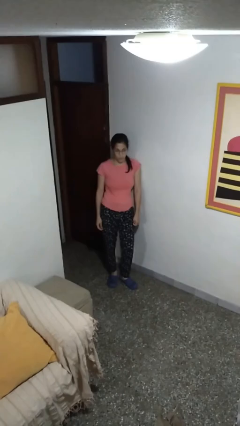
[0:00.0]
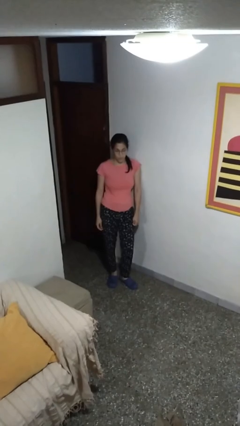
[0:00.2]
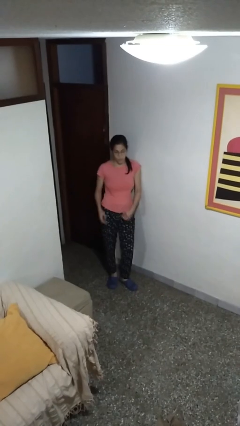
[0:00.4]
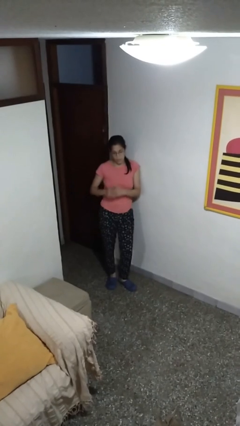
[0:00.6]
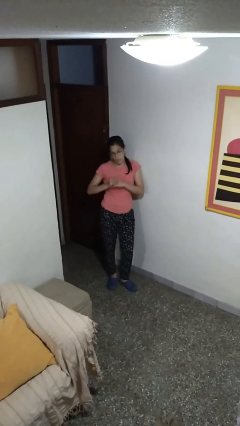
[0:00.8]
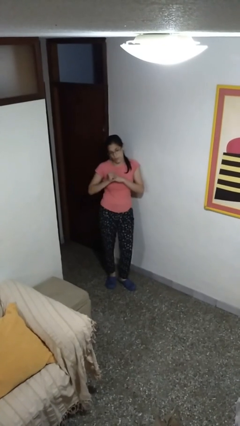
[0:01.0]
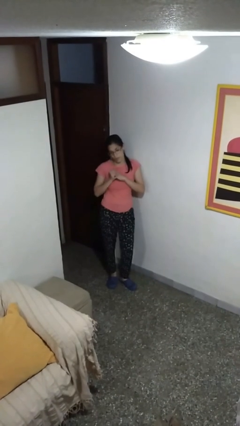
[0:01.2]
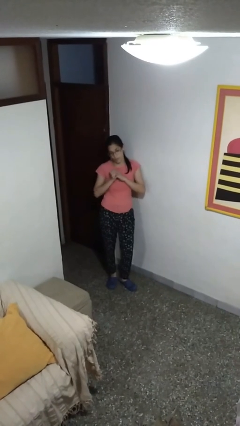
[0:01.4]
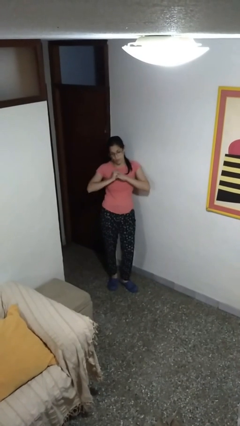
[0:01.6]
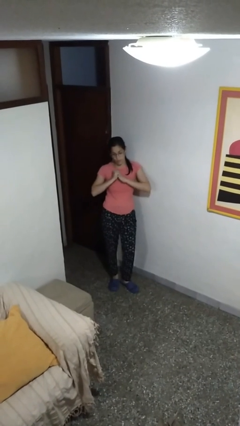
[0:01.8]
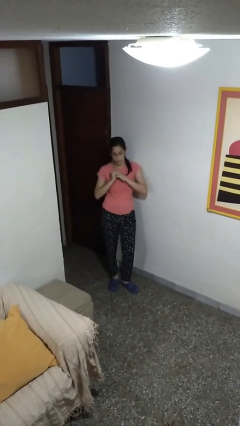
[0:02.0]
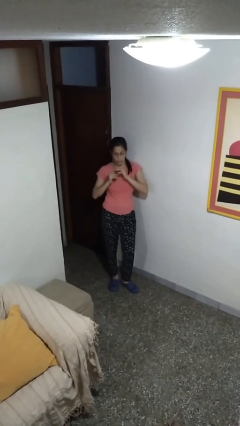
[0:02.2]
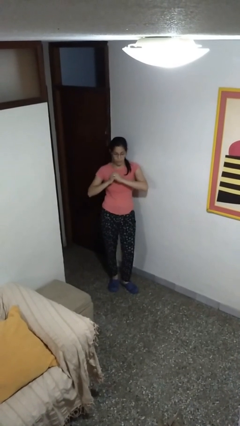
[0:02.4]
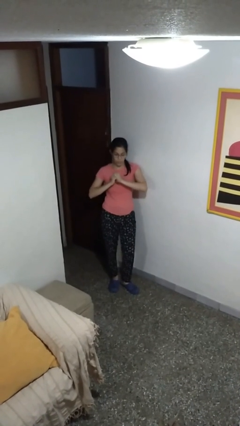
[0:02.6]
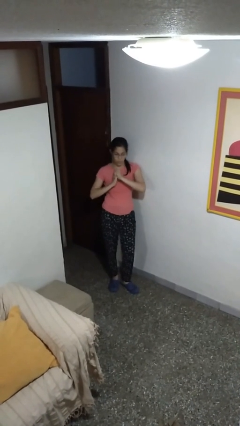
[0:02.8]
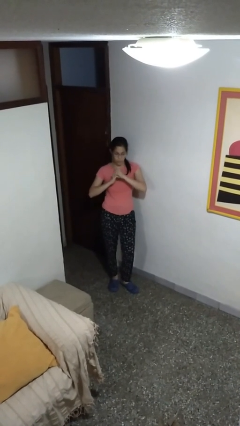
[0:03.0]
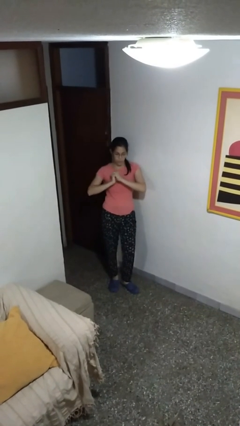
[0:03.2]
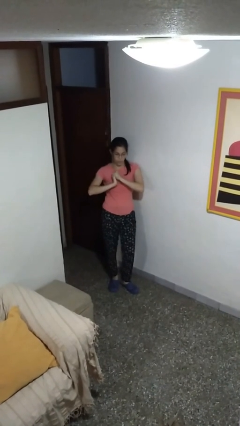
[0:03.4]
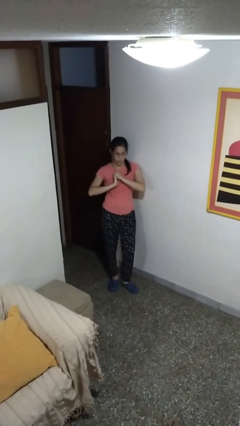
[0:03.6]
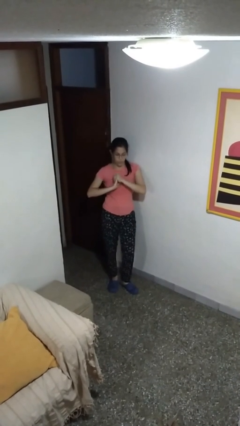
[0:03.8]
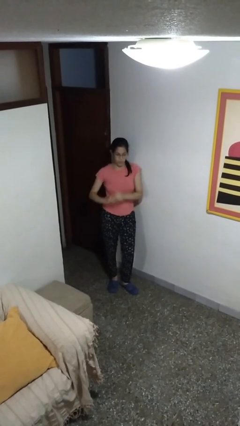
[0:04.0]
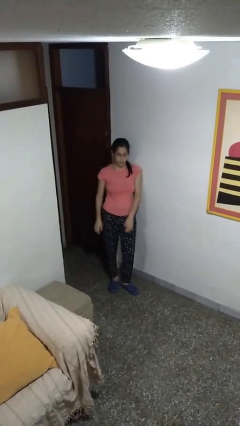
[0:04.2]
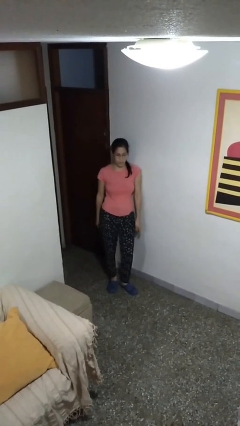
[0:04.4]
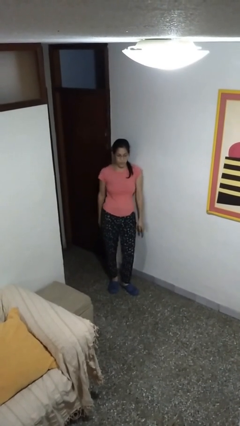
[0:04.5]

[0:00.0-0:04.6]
person cracks knuckles

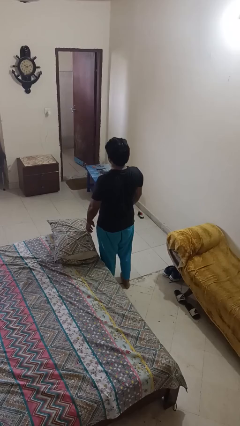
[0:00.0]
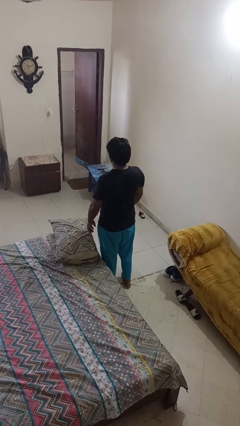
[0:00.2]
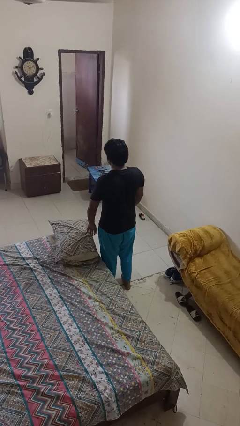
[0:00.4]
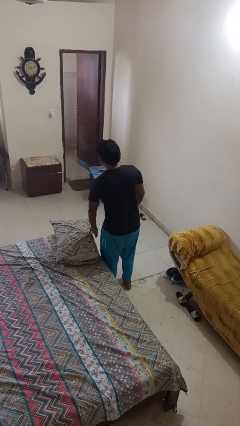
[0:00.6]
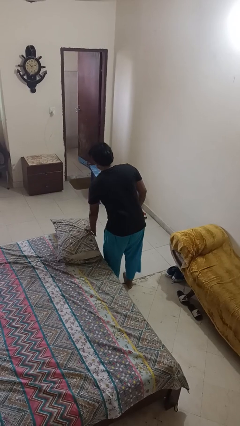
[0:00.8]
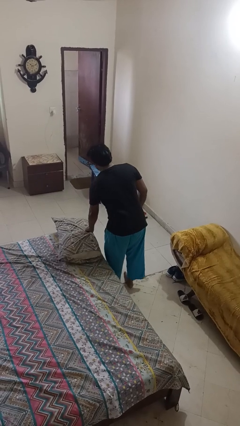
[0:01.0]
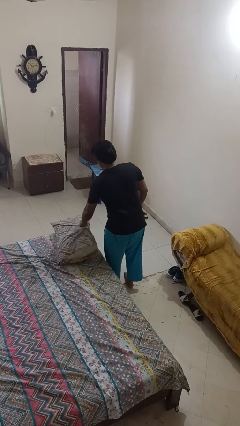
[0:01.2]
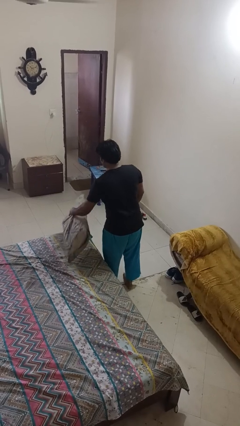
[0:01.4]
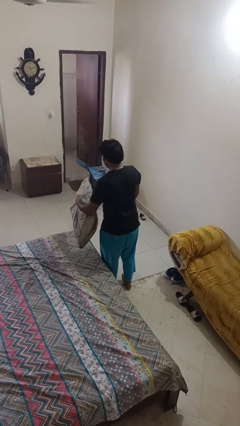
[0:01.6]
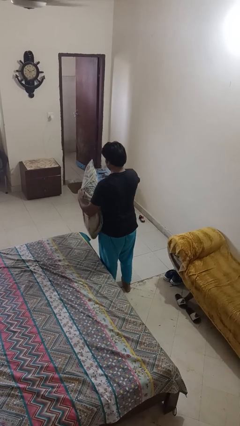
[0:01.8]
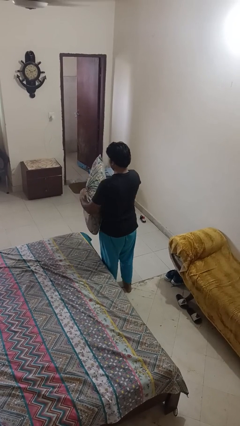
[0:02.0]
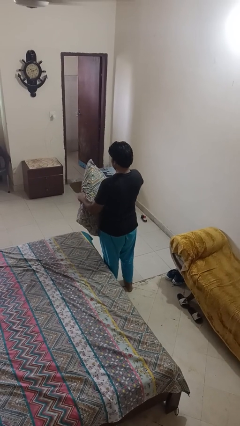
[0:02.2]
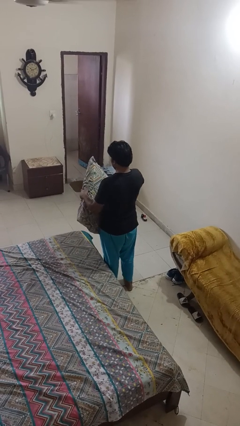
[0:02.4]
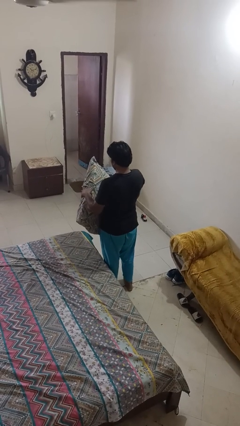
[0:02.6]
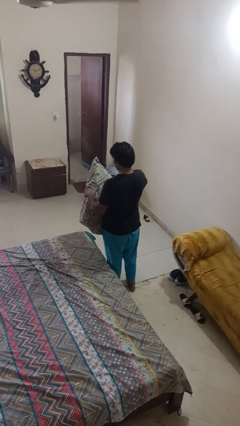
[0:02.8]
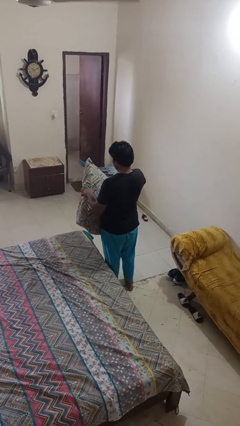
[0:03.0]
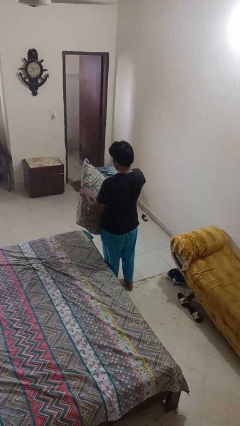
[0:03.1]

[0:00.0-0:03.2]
person picks up object from bed

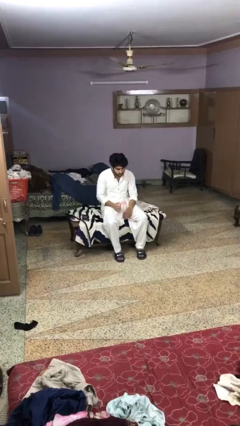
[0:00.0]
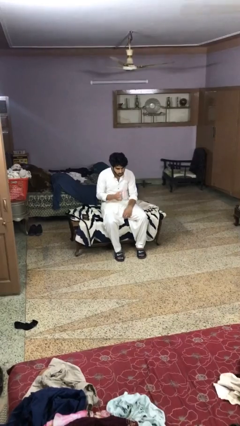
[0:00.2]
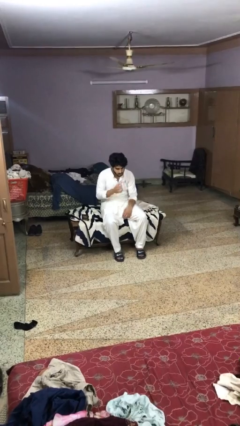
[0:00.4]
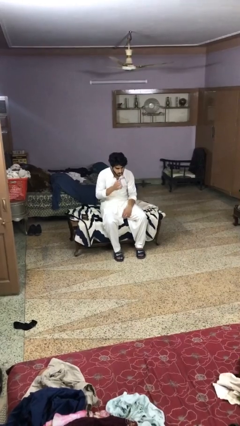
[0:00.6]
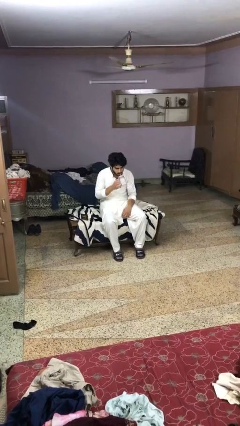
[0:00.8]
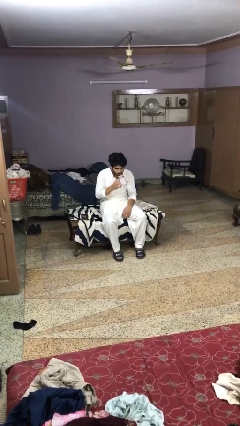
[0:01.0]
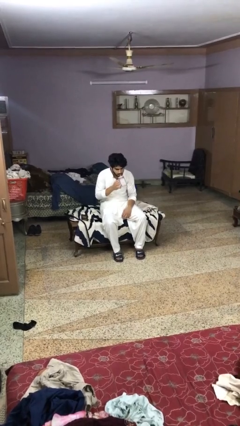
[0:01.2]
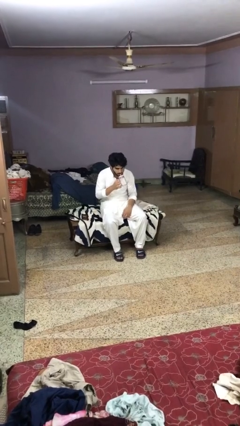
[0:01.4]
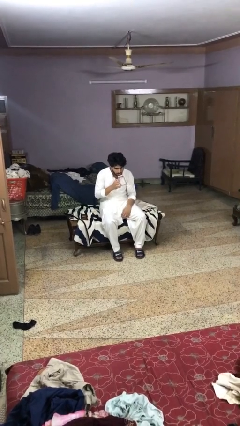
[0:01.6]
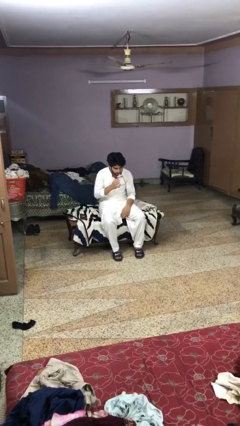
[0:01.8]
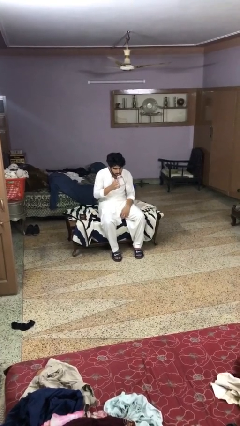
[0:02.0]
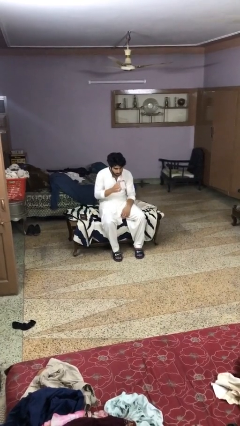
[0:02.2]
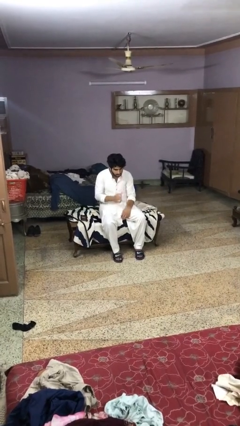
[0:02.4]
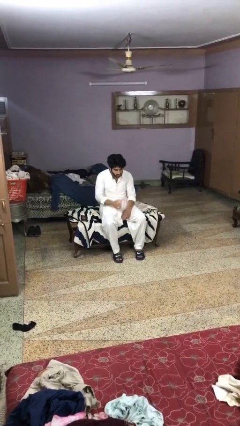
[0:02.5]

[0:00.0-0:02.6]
person drinks from straw

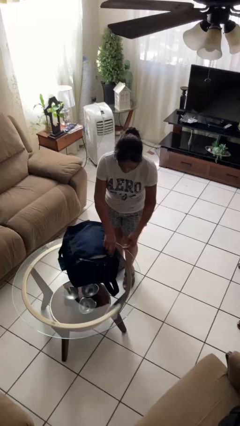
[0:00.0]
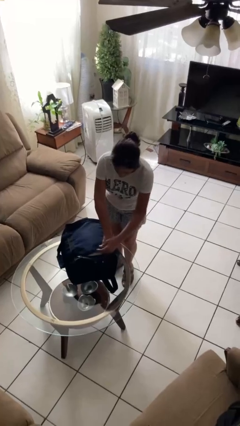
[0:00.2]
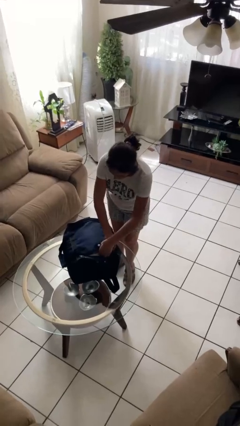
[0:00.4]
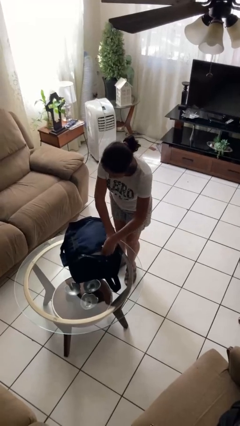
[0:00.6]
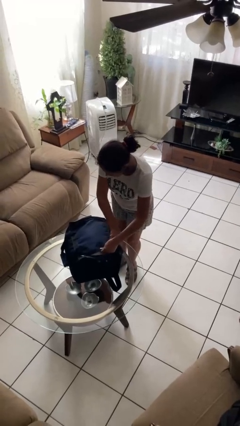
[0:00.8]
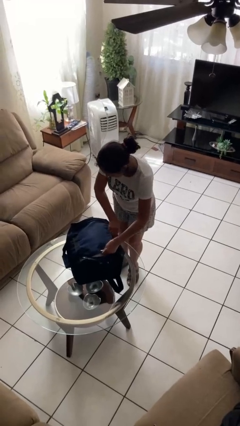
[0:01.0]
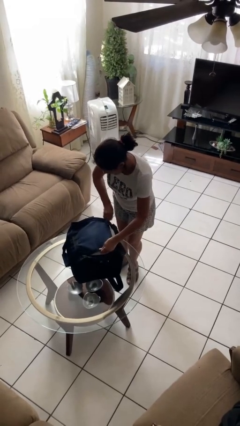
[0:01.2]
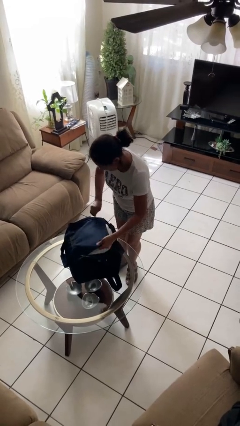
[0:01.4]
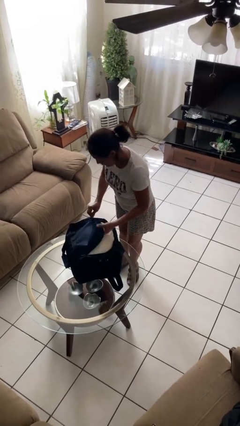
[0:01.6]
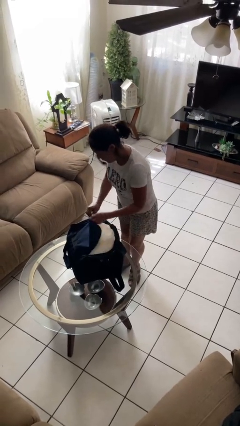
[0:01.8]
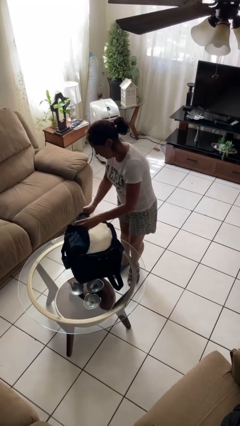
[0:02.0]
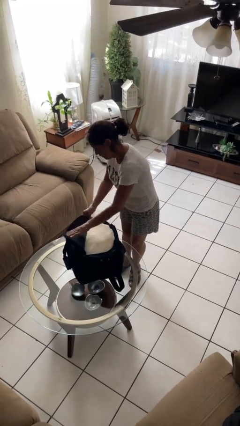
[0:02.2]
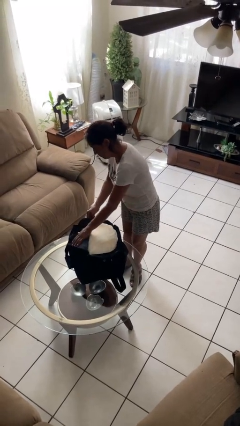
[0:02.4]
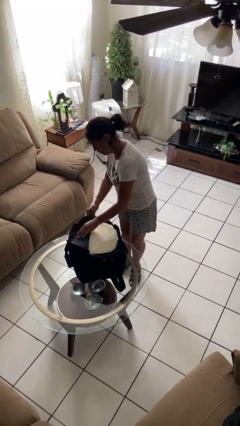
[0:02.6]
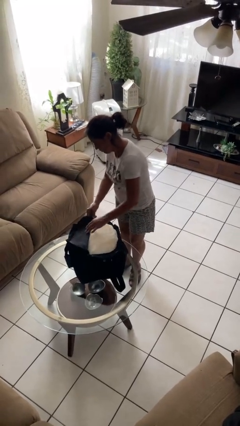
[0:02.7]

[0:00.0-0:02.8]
person opens suitcase

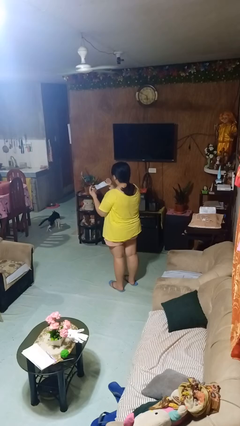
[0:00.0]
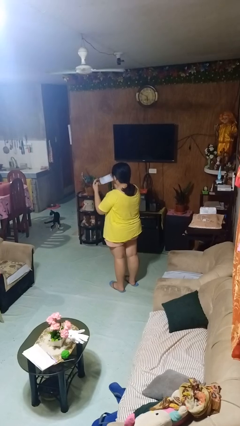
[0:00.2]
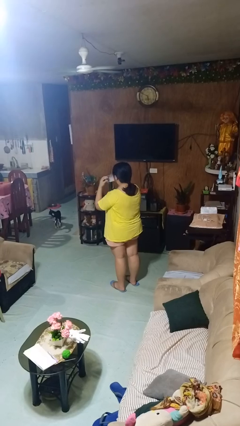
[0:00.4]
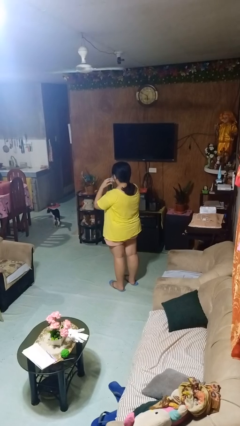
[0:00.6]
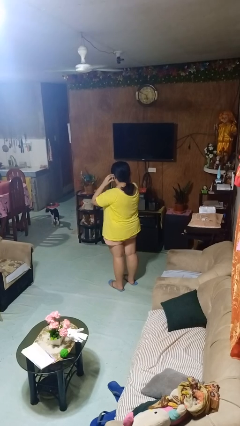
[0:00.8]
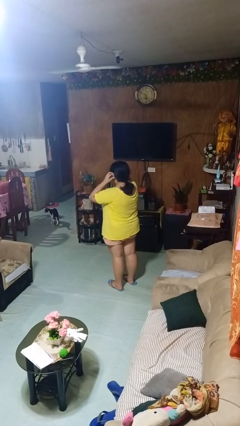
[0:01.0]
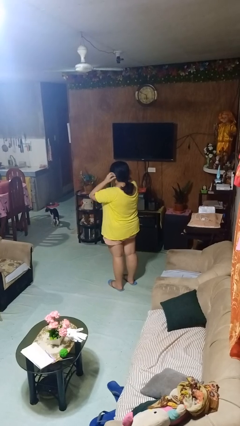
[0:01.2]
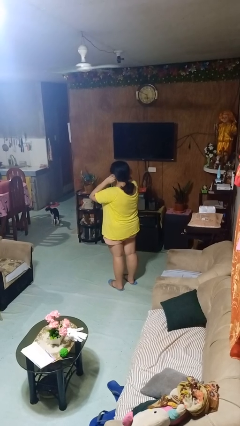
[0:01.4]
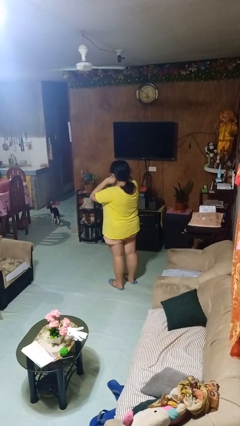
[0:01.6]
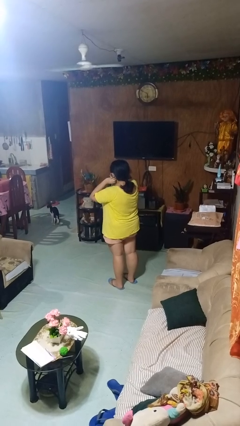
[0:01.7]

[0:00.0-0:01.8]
person puts on facemask

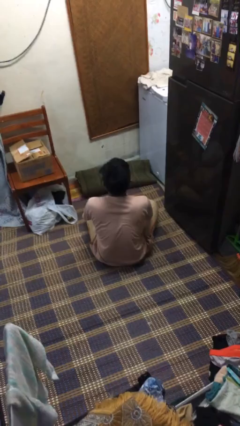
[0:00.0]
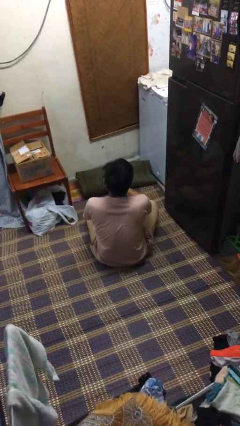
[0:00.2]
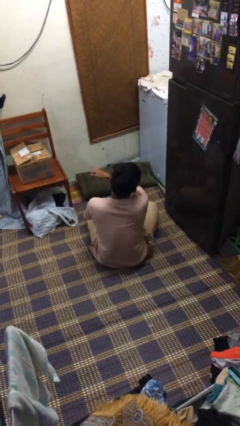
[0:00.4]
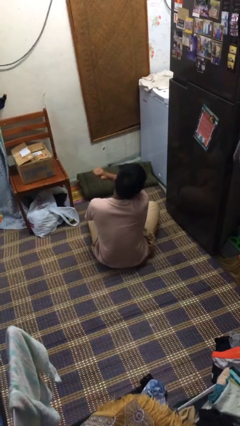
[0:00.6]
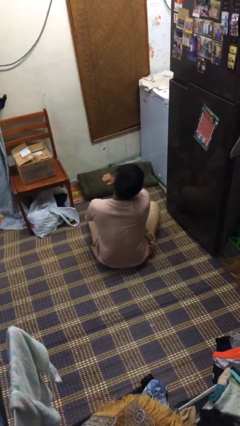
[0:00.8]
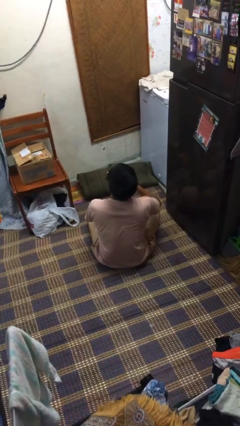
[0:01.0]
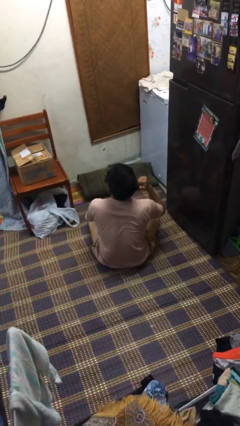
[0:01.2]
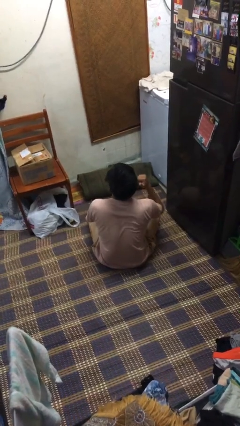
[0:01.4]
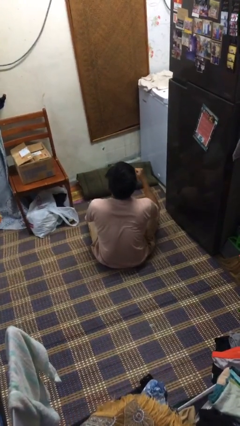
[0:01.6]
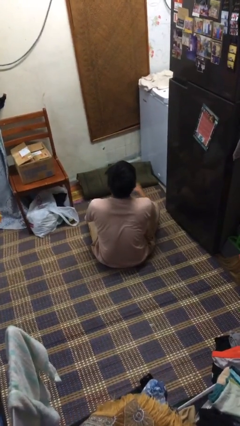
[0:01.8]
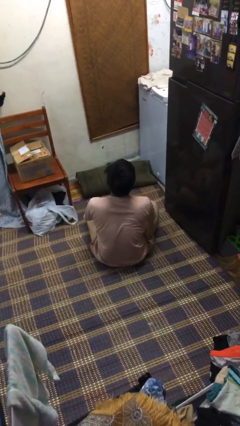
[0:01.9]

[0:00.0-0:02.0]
person gestures cut

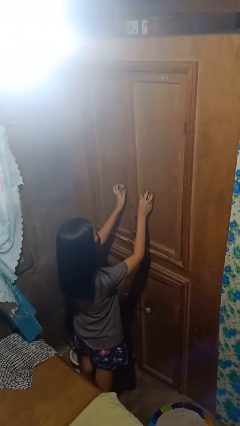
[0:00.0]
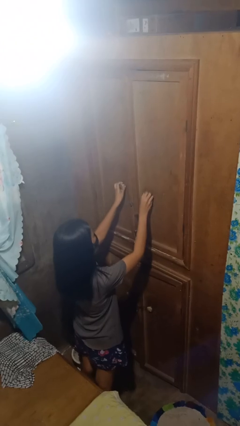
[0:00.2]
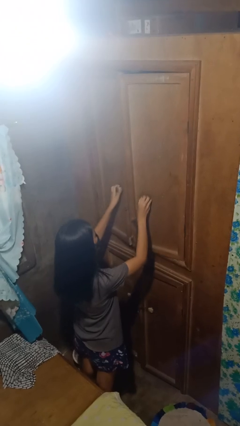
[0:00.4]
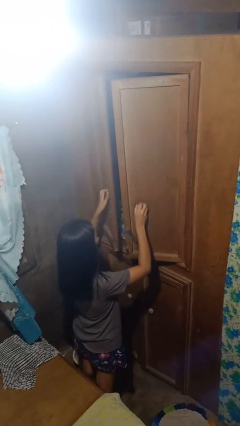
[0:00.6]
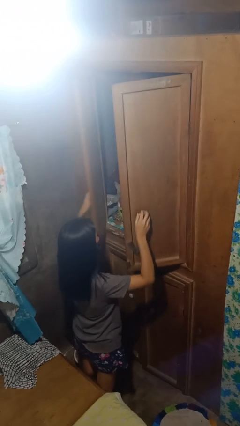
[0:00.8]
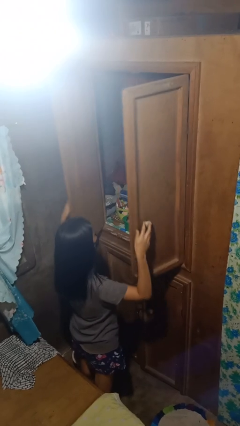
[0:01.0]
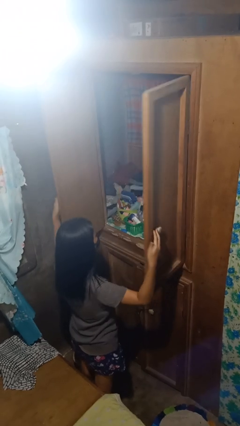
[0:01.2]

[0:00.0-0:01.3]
person opens closet door
